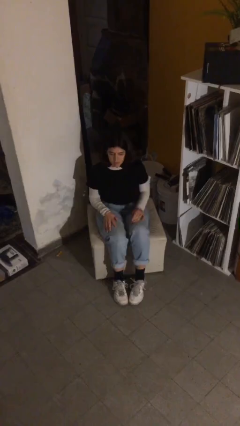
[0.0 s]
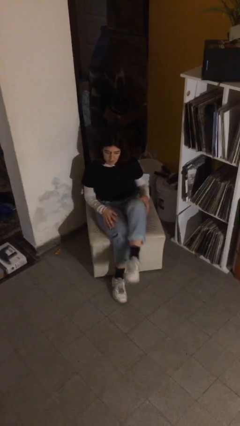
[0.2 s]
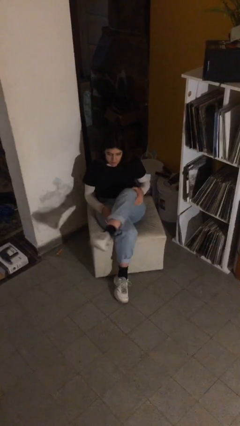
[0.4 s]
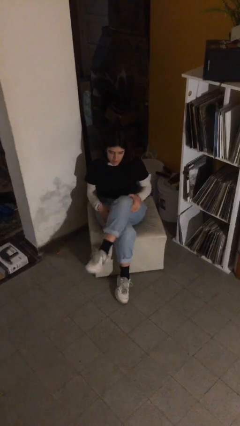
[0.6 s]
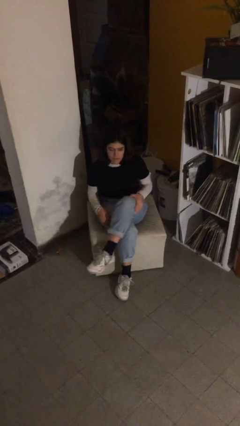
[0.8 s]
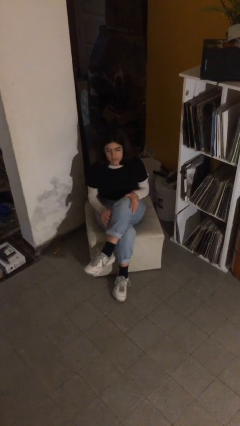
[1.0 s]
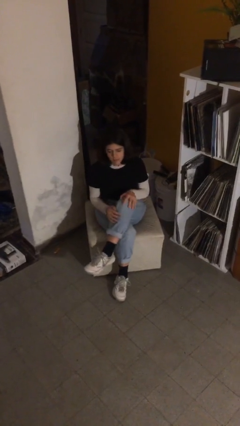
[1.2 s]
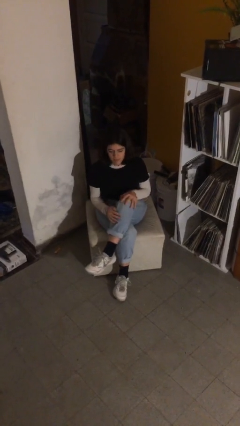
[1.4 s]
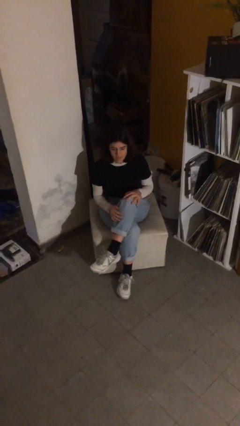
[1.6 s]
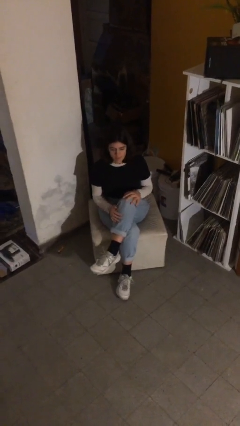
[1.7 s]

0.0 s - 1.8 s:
person crosses legs

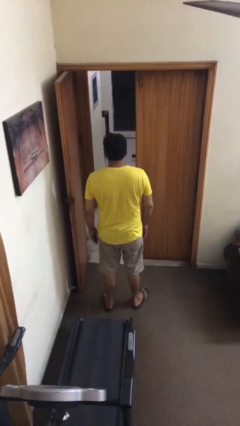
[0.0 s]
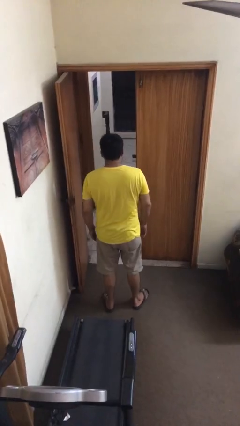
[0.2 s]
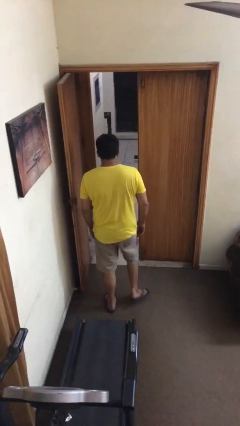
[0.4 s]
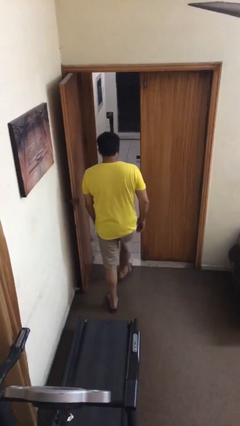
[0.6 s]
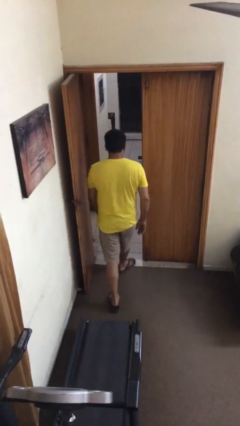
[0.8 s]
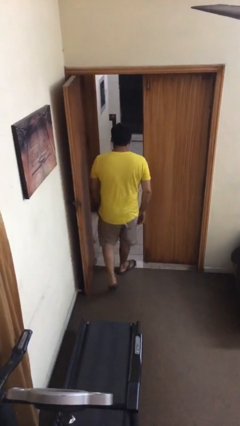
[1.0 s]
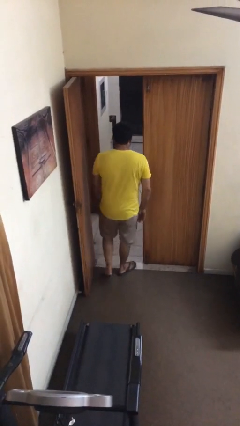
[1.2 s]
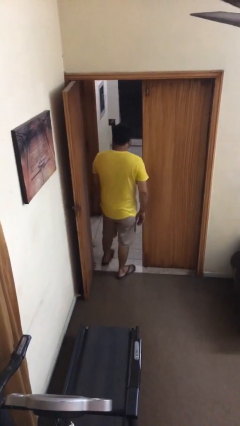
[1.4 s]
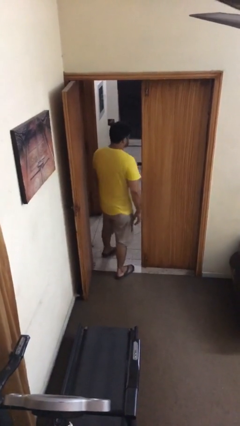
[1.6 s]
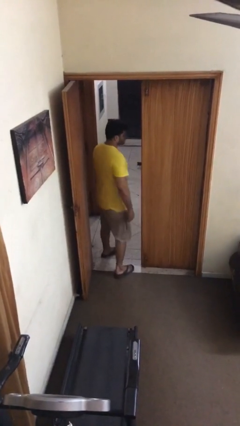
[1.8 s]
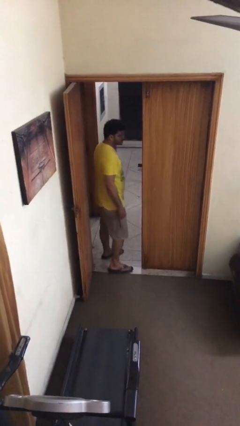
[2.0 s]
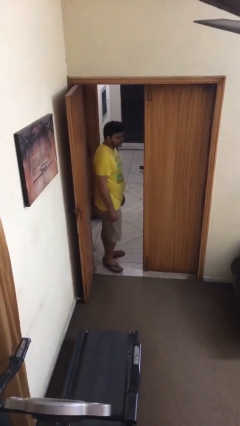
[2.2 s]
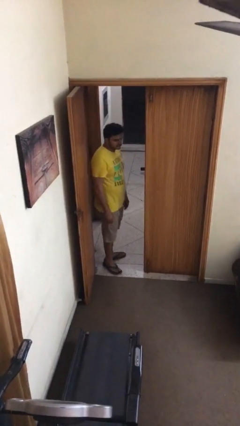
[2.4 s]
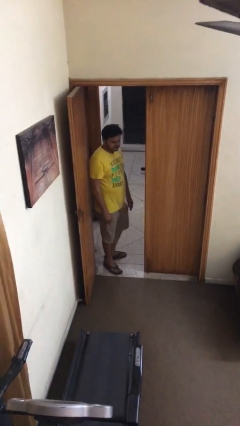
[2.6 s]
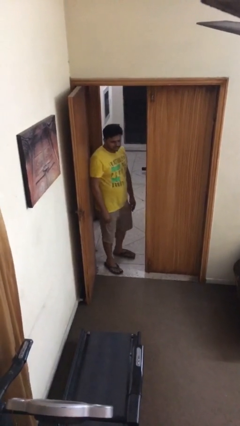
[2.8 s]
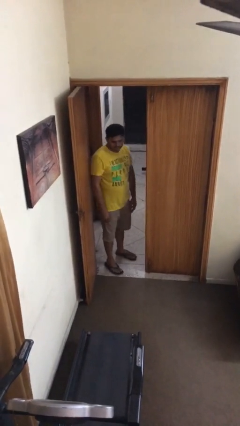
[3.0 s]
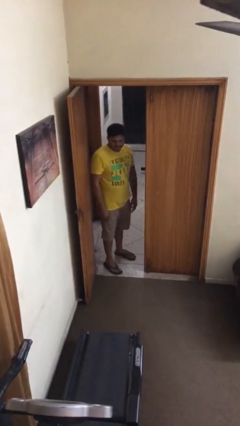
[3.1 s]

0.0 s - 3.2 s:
person exits scene through structure

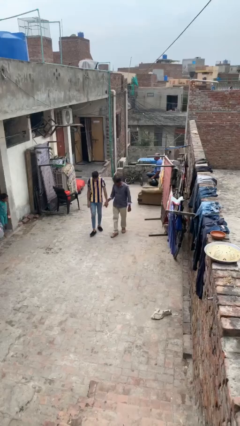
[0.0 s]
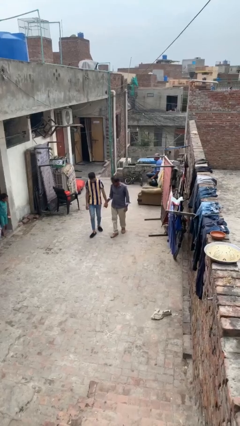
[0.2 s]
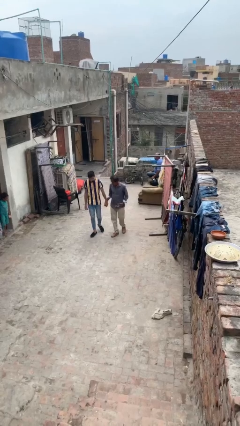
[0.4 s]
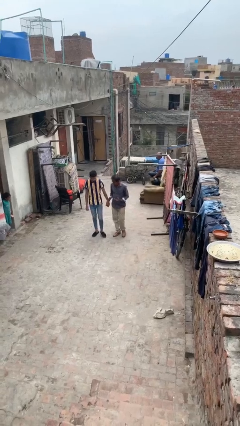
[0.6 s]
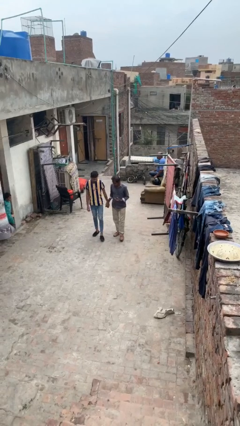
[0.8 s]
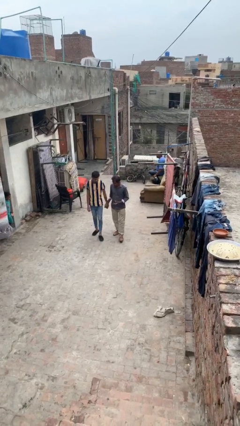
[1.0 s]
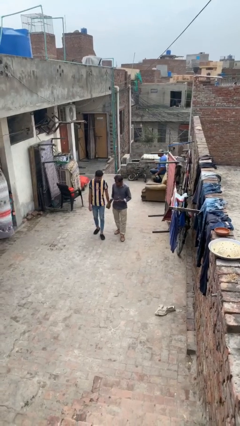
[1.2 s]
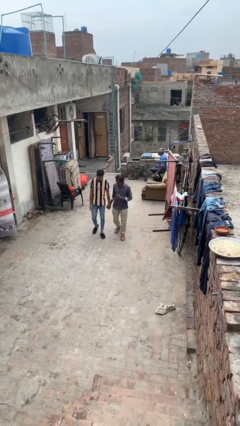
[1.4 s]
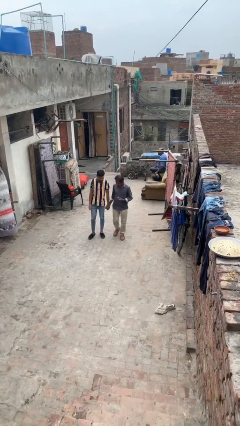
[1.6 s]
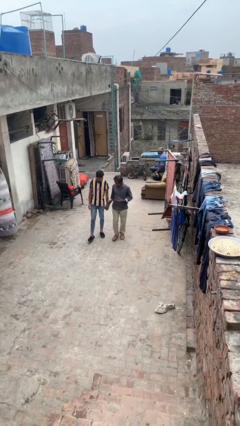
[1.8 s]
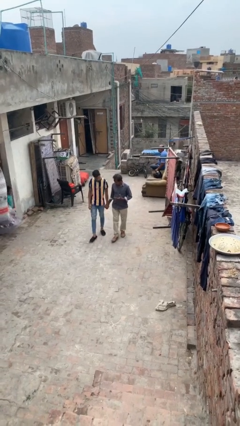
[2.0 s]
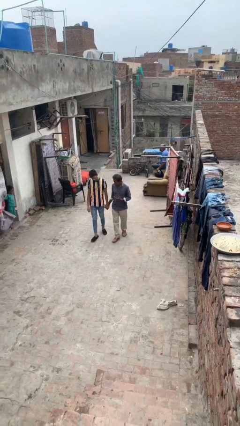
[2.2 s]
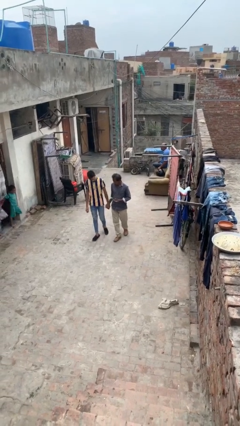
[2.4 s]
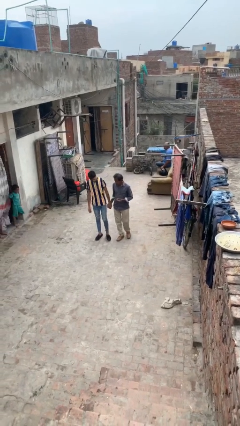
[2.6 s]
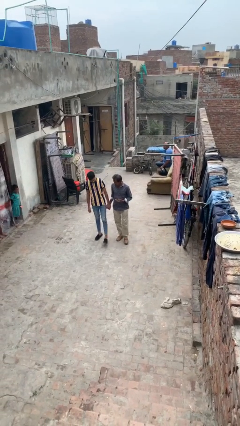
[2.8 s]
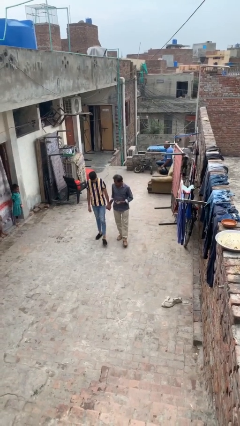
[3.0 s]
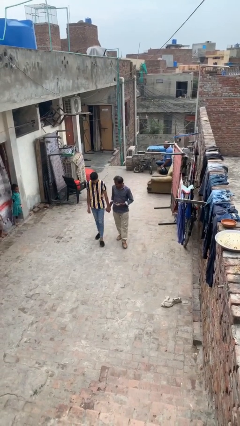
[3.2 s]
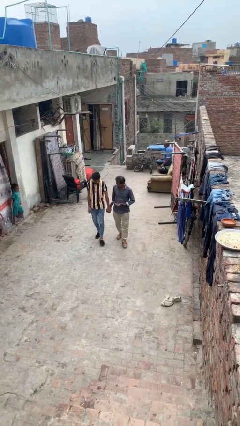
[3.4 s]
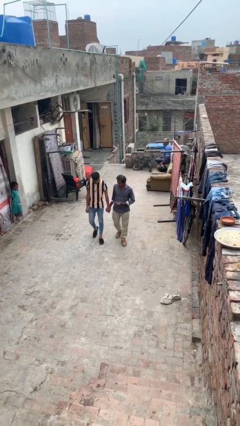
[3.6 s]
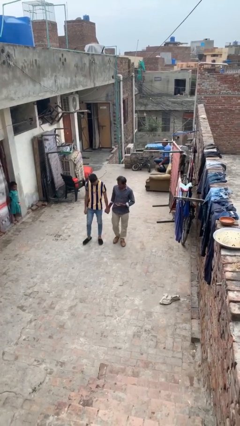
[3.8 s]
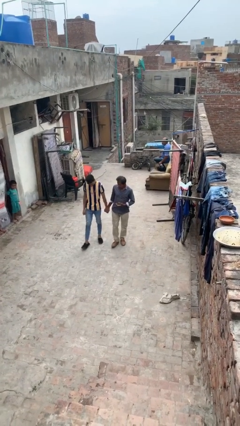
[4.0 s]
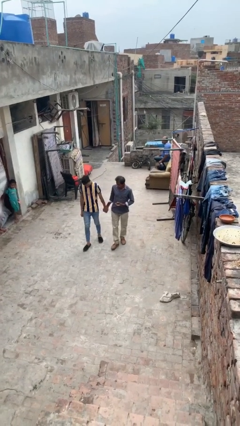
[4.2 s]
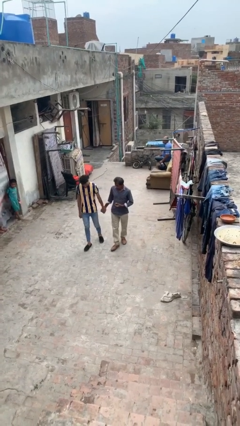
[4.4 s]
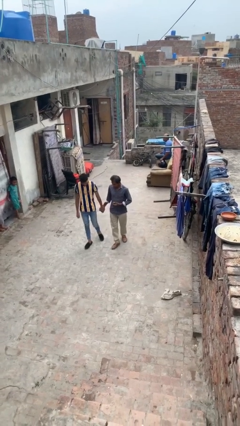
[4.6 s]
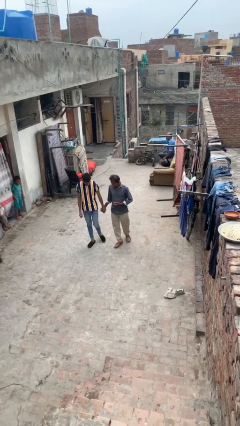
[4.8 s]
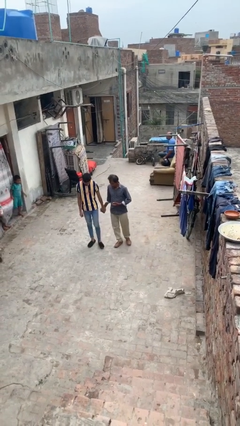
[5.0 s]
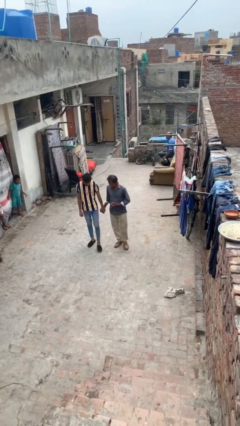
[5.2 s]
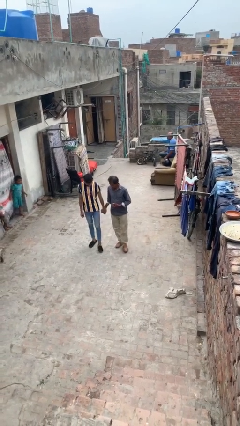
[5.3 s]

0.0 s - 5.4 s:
person holds hand

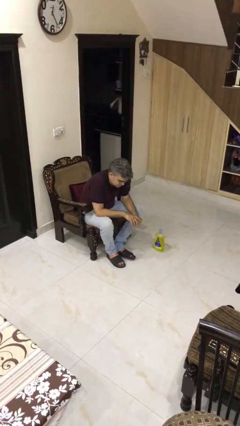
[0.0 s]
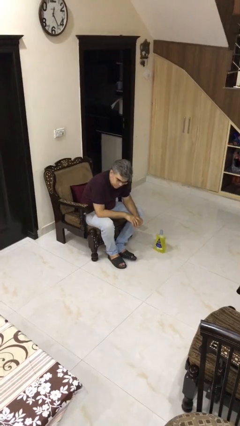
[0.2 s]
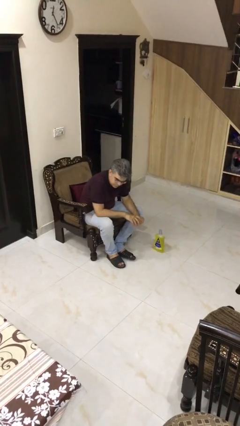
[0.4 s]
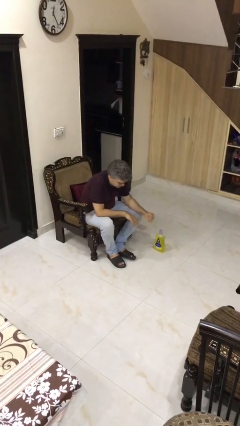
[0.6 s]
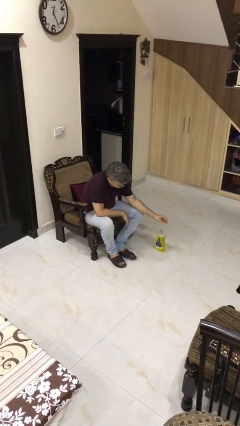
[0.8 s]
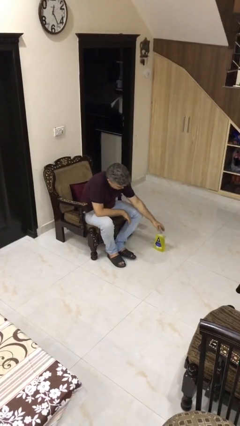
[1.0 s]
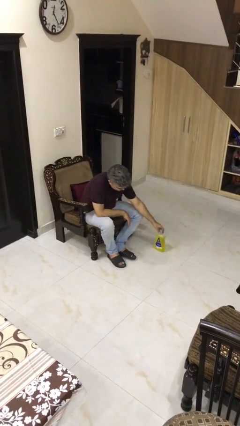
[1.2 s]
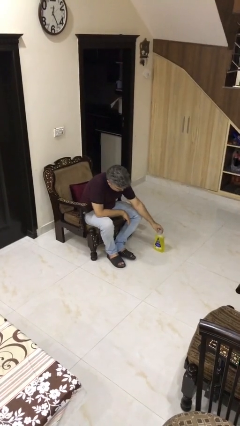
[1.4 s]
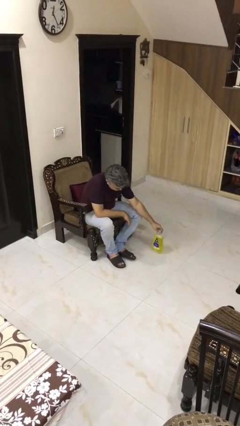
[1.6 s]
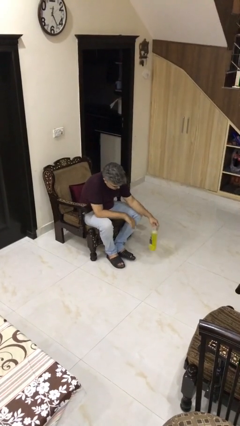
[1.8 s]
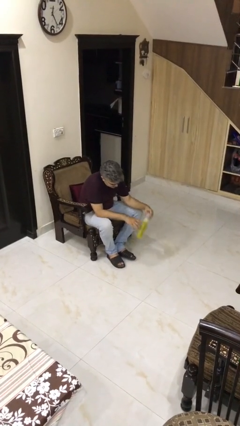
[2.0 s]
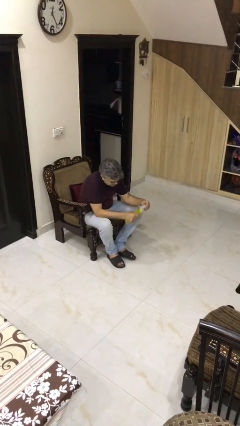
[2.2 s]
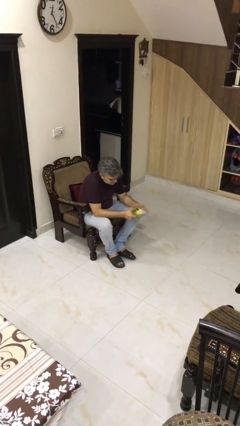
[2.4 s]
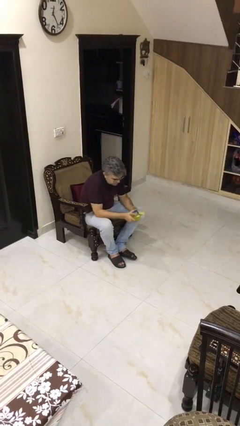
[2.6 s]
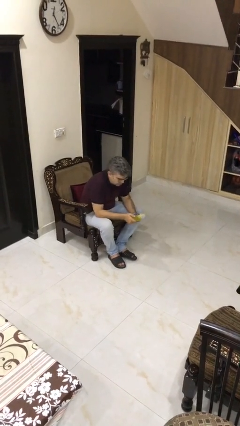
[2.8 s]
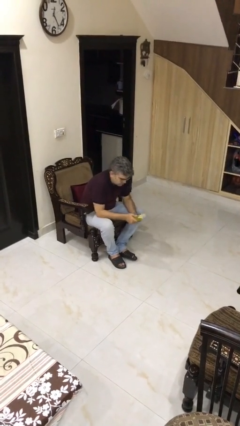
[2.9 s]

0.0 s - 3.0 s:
person picks up object from floor

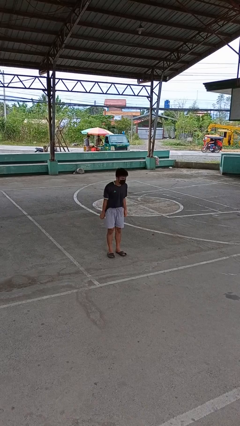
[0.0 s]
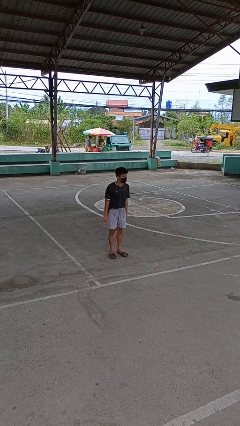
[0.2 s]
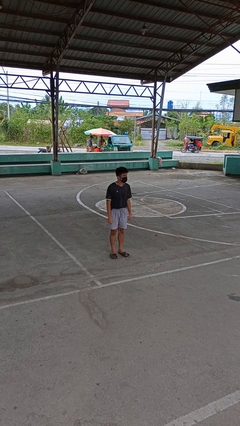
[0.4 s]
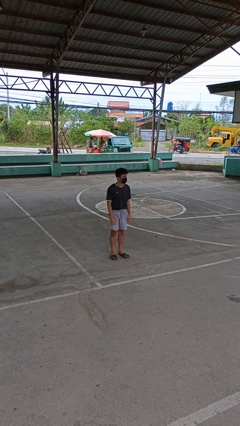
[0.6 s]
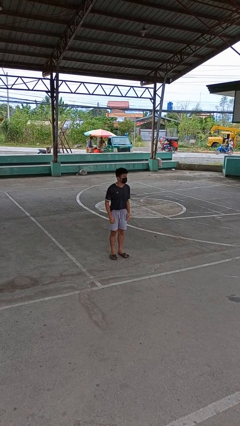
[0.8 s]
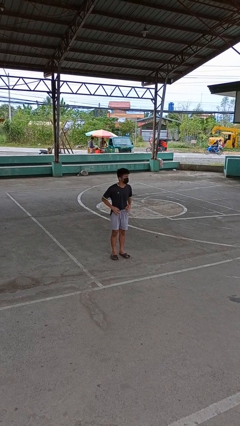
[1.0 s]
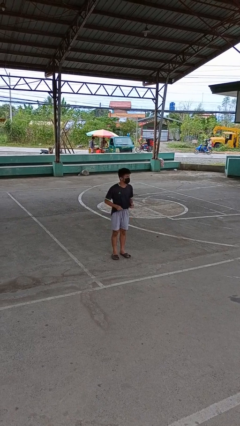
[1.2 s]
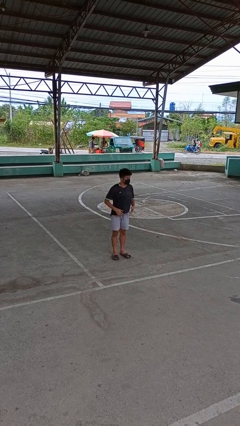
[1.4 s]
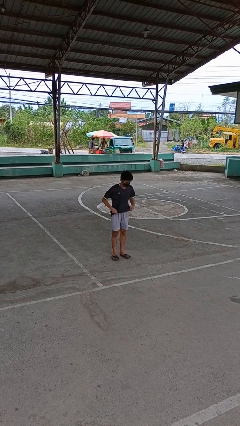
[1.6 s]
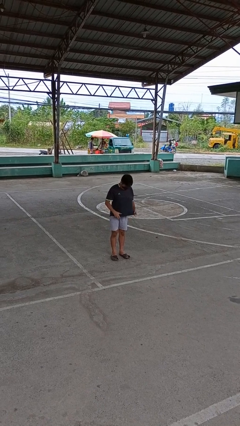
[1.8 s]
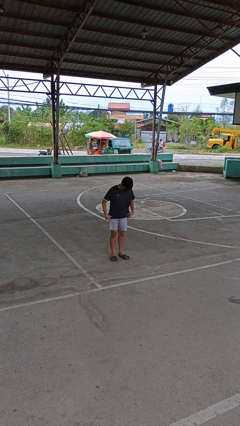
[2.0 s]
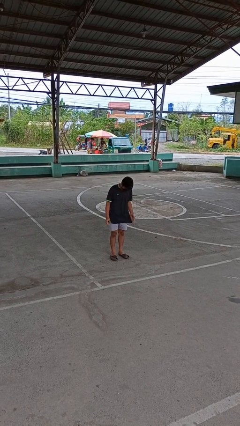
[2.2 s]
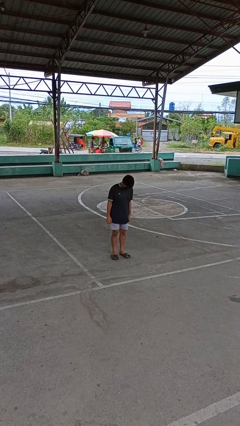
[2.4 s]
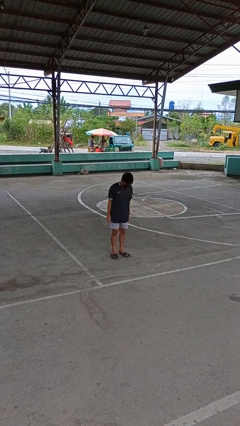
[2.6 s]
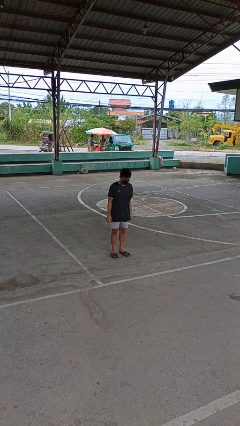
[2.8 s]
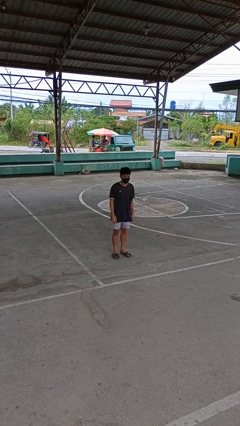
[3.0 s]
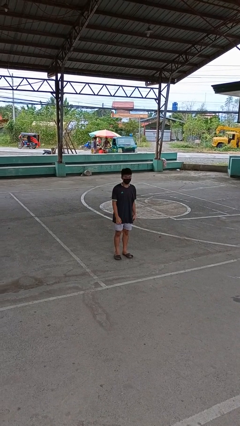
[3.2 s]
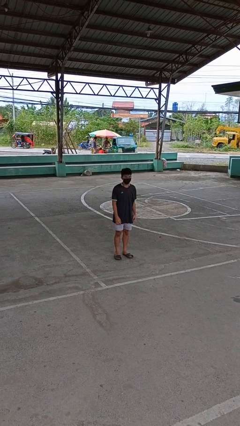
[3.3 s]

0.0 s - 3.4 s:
person untucks shirt

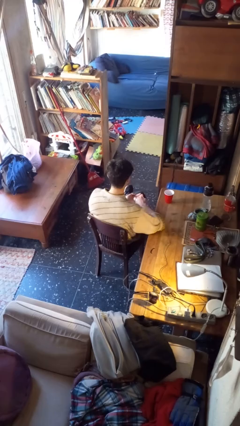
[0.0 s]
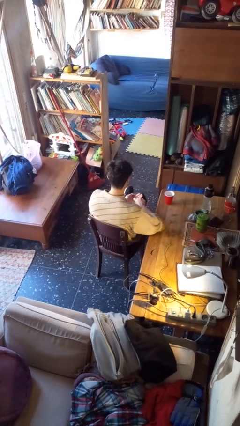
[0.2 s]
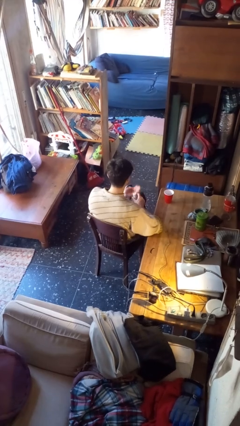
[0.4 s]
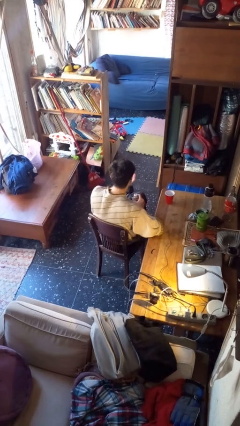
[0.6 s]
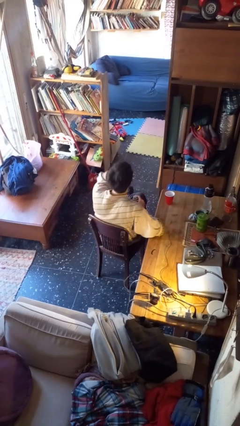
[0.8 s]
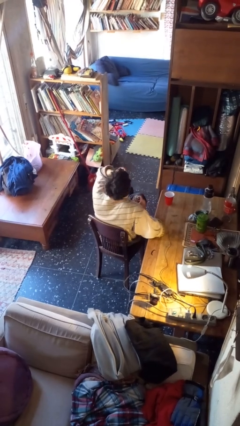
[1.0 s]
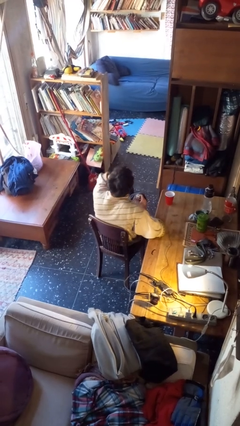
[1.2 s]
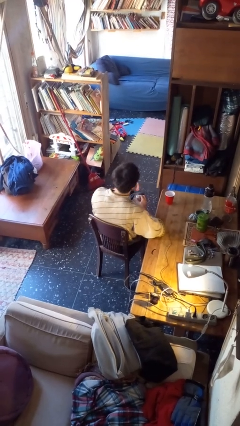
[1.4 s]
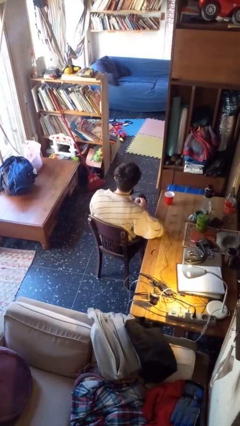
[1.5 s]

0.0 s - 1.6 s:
person takes medicine pills
